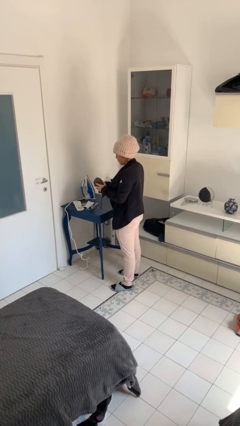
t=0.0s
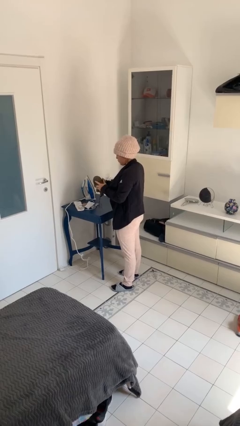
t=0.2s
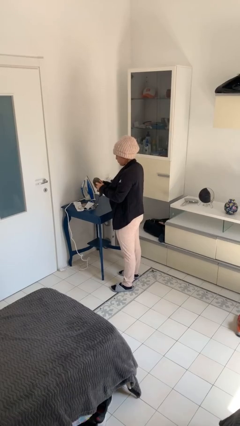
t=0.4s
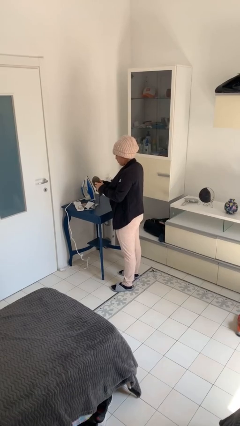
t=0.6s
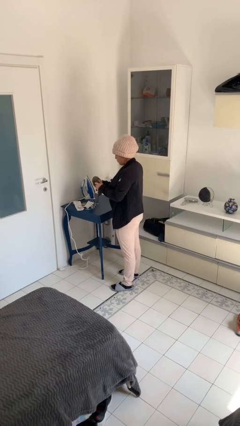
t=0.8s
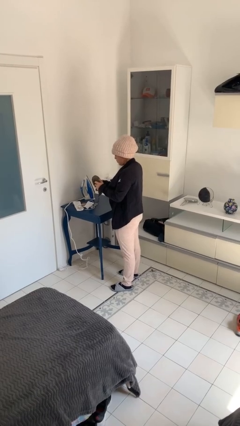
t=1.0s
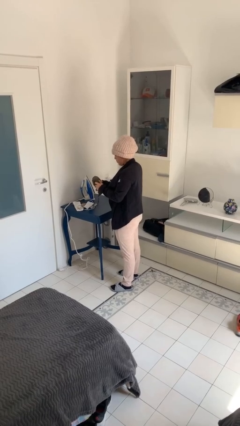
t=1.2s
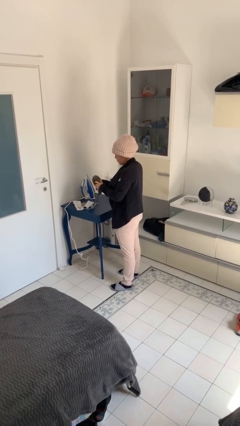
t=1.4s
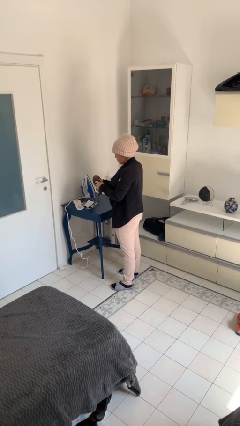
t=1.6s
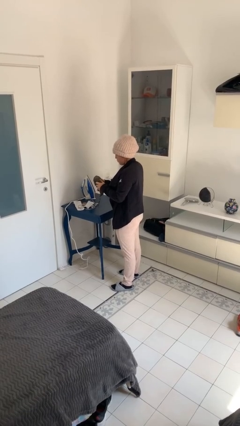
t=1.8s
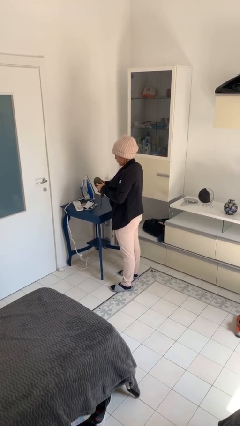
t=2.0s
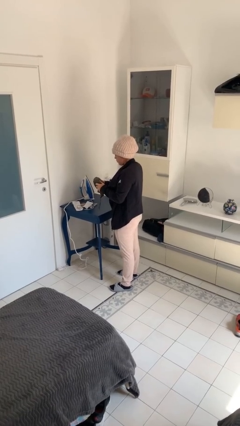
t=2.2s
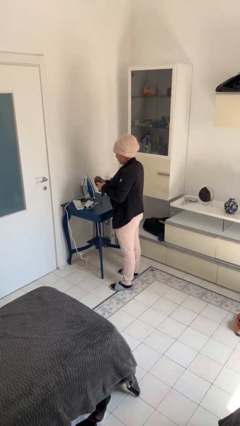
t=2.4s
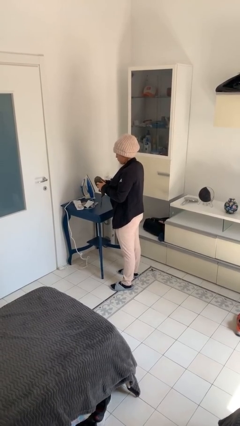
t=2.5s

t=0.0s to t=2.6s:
person squeezes object

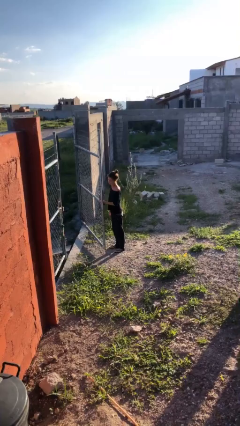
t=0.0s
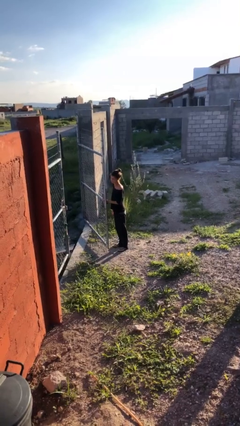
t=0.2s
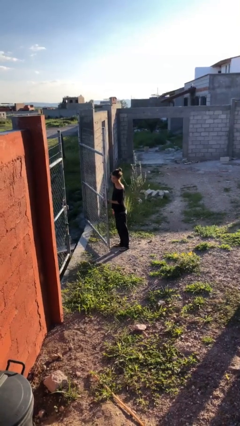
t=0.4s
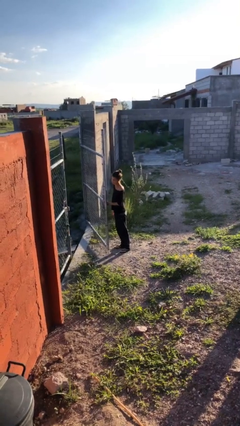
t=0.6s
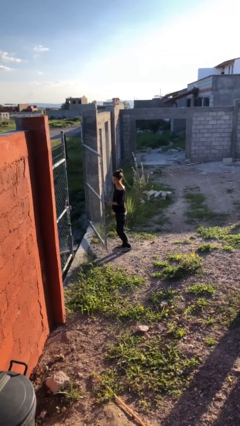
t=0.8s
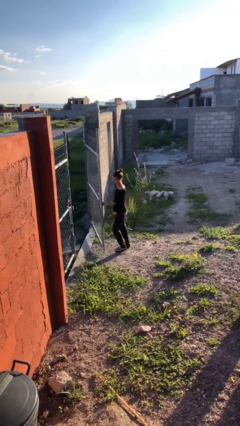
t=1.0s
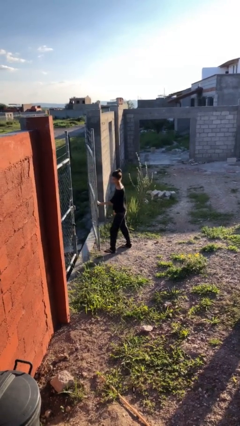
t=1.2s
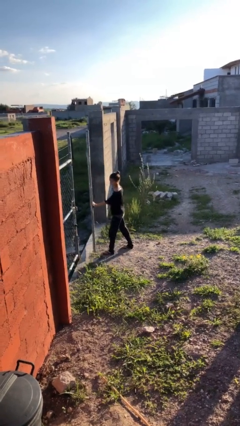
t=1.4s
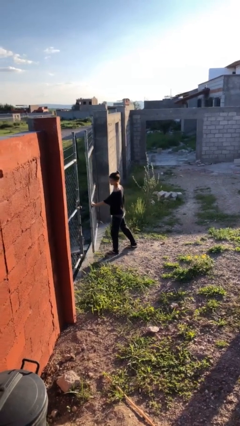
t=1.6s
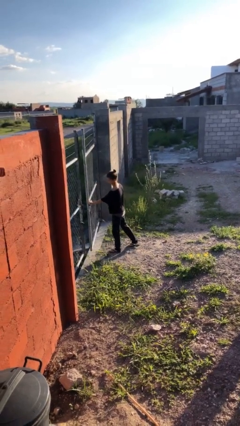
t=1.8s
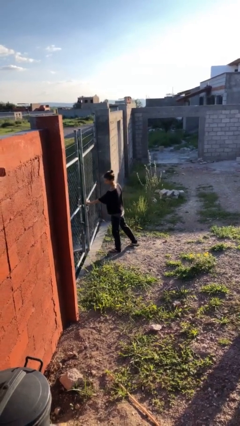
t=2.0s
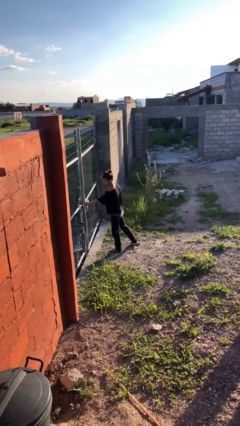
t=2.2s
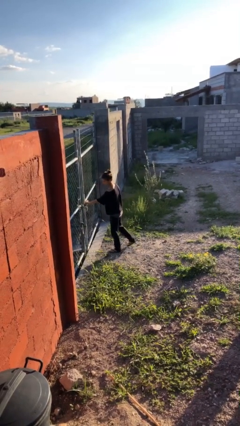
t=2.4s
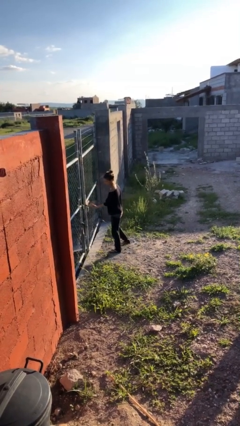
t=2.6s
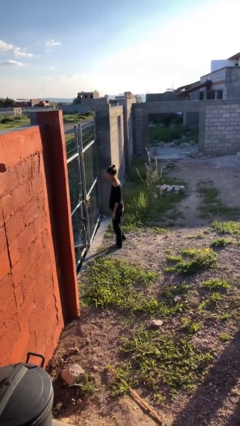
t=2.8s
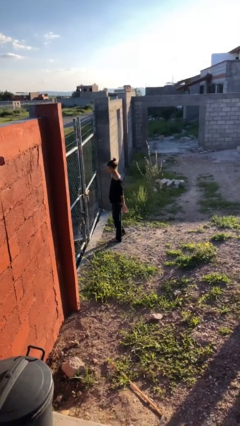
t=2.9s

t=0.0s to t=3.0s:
person closes gate

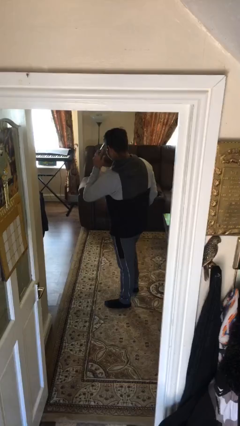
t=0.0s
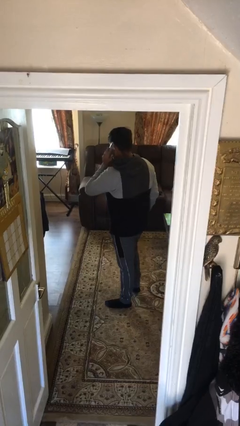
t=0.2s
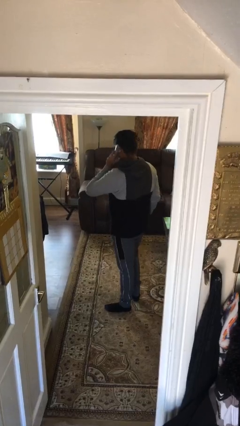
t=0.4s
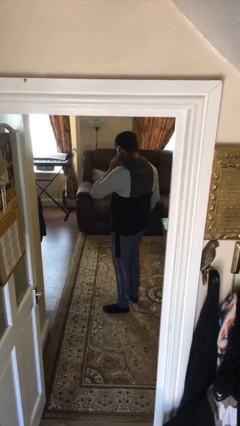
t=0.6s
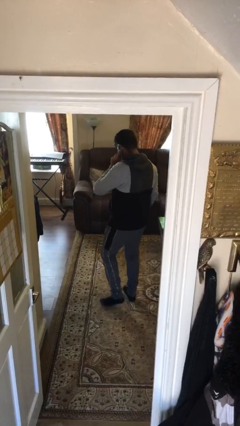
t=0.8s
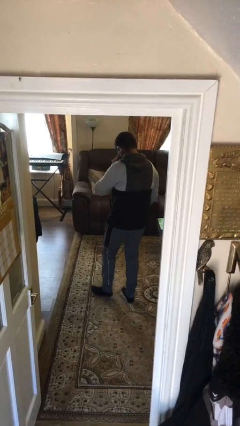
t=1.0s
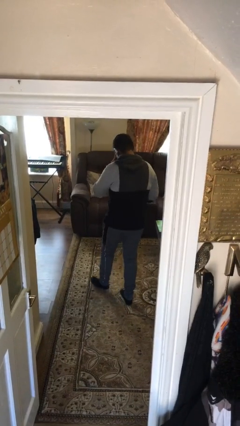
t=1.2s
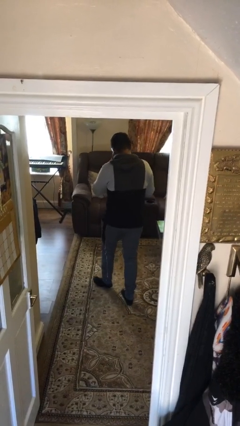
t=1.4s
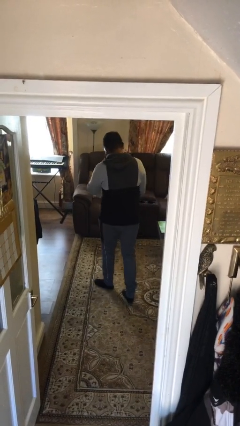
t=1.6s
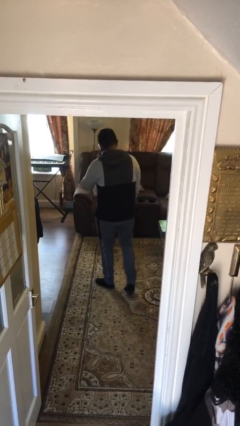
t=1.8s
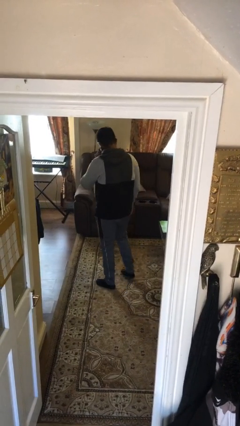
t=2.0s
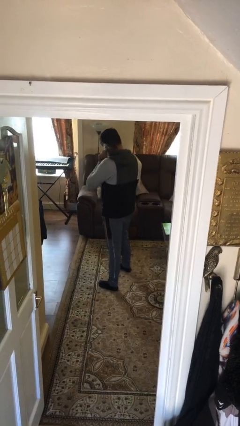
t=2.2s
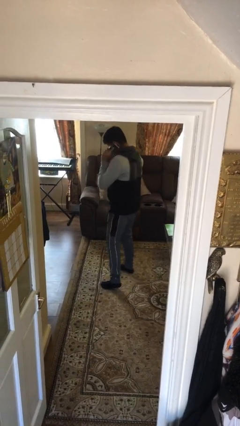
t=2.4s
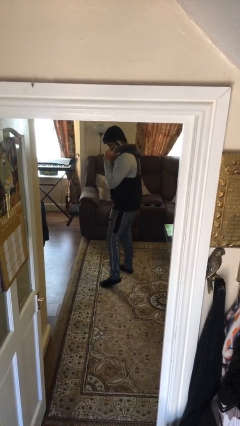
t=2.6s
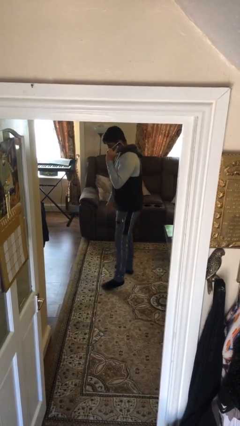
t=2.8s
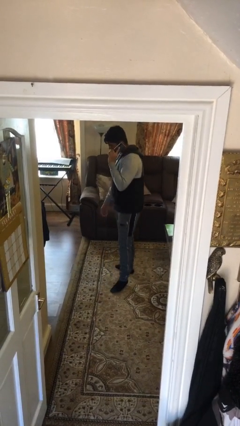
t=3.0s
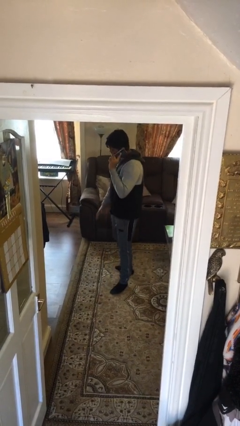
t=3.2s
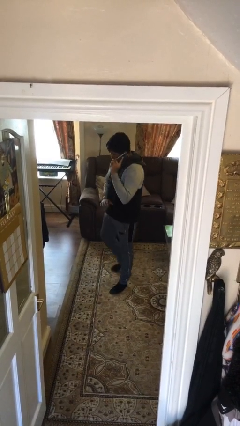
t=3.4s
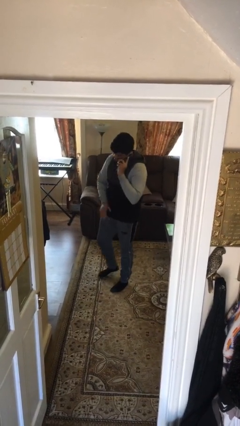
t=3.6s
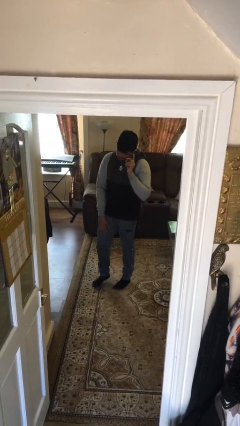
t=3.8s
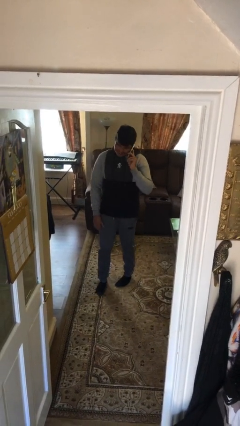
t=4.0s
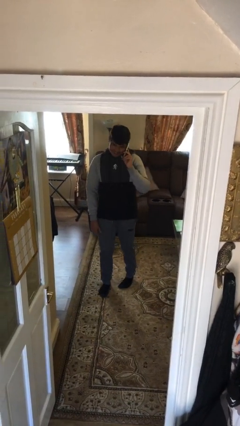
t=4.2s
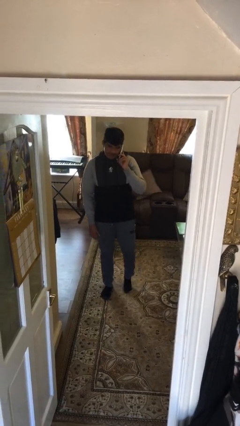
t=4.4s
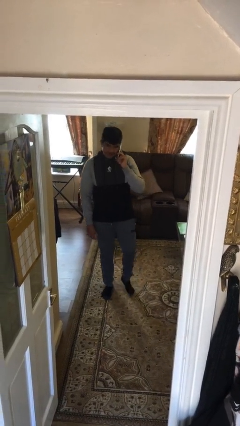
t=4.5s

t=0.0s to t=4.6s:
person talks on phone

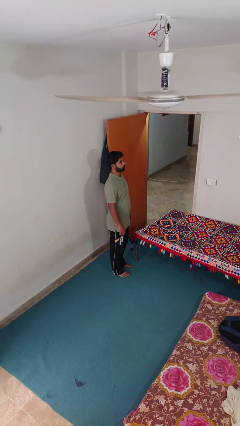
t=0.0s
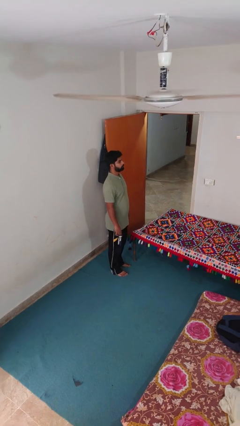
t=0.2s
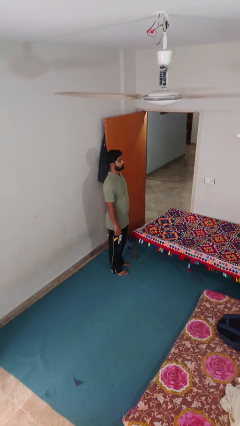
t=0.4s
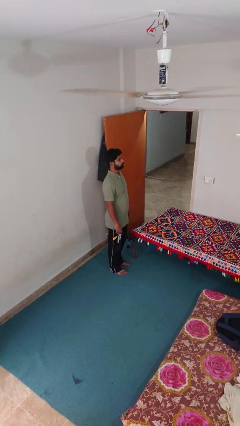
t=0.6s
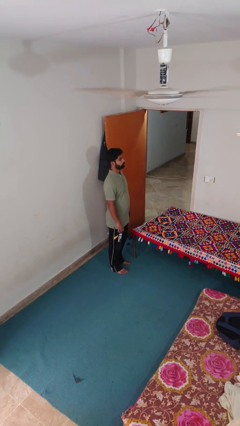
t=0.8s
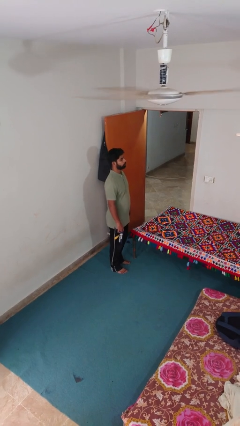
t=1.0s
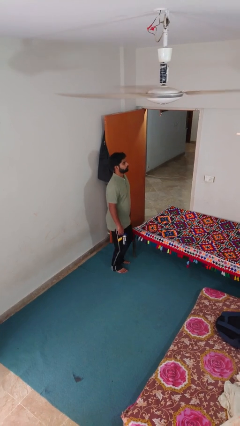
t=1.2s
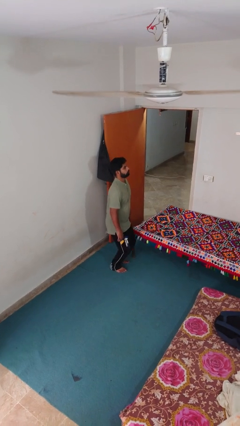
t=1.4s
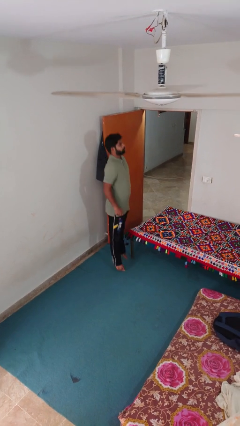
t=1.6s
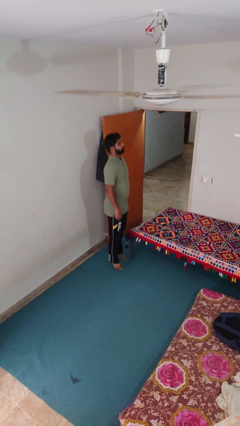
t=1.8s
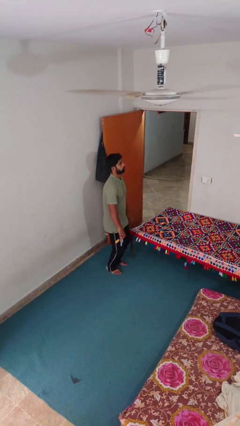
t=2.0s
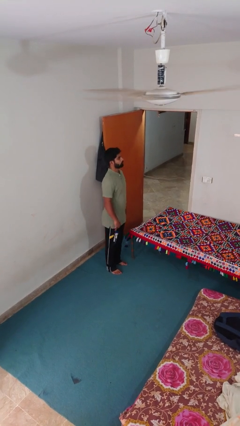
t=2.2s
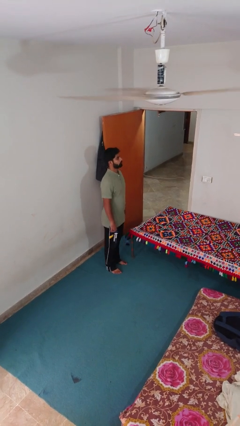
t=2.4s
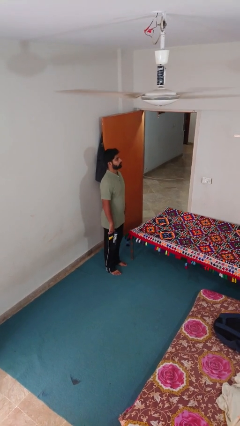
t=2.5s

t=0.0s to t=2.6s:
person jumps

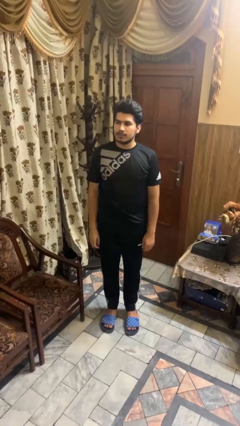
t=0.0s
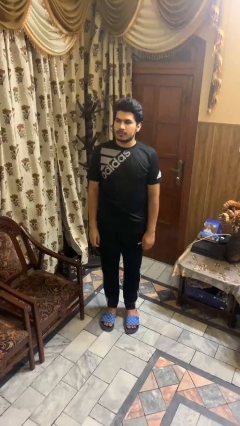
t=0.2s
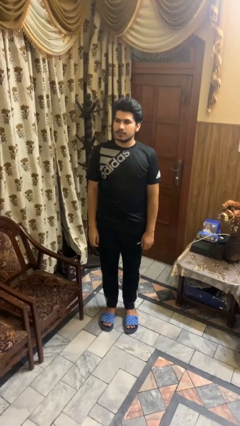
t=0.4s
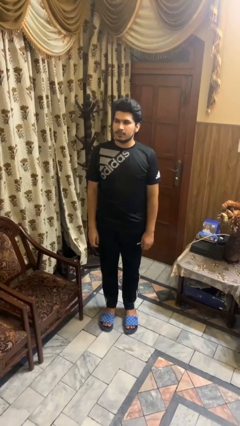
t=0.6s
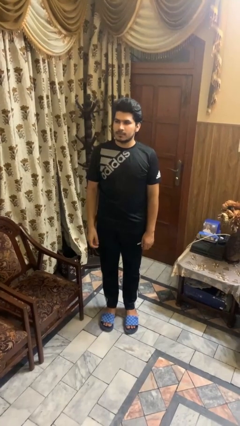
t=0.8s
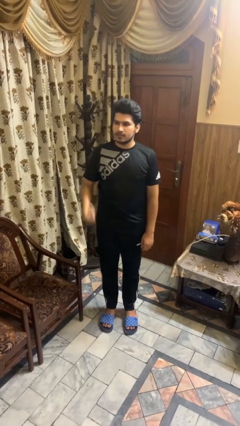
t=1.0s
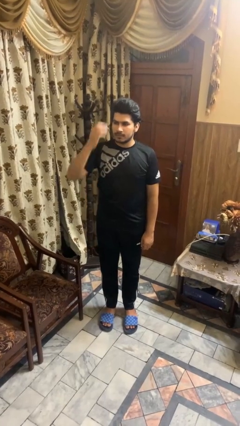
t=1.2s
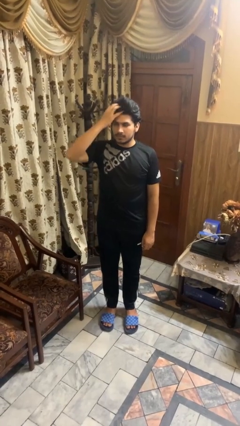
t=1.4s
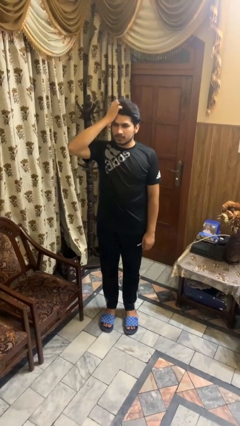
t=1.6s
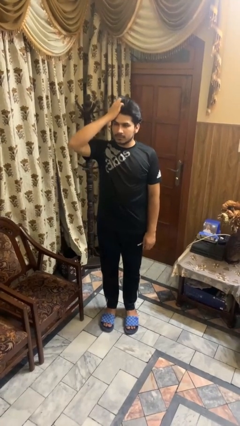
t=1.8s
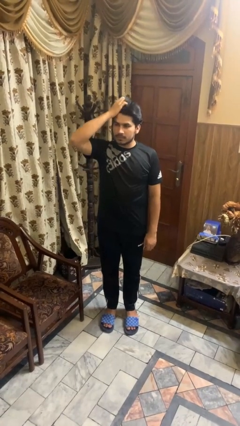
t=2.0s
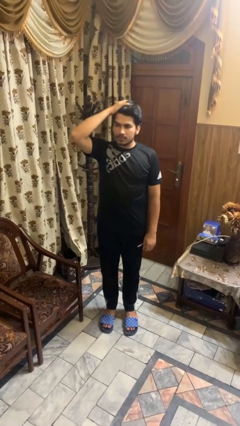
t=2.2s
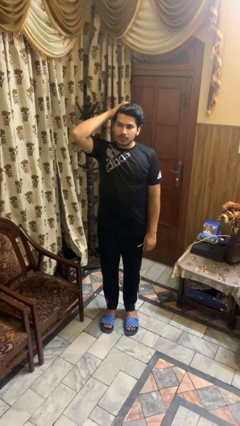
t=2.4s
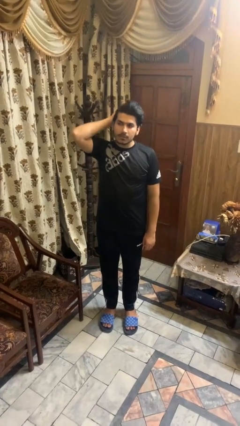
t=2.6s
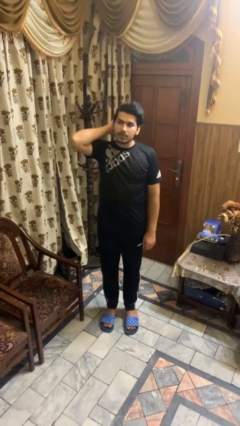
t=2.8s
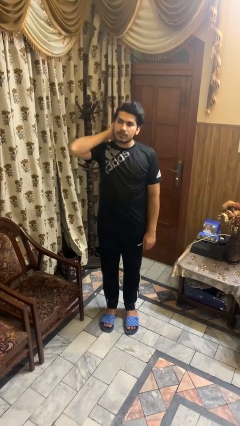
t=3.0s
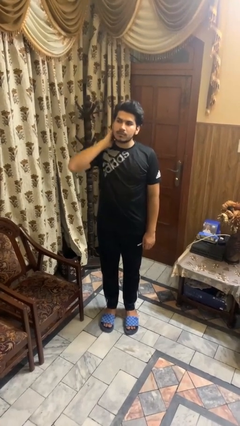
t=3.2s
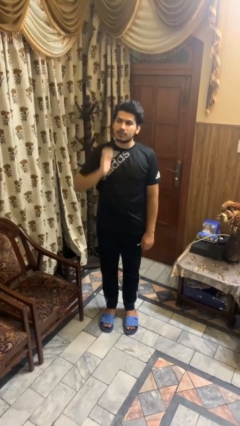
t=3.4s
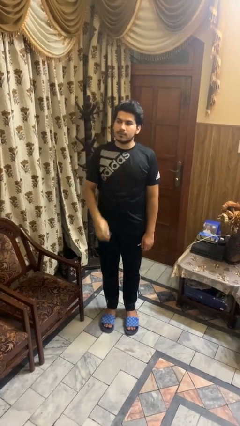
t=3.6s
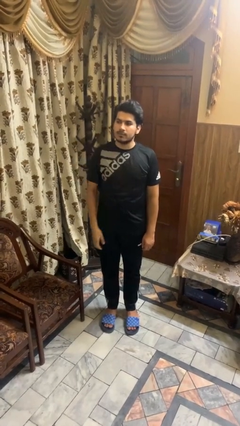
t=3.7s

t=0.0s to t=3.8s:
person scratches face

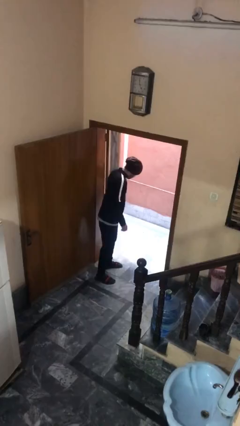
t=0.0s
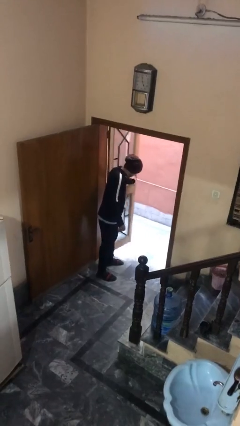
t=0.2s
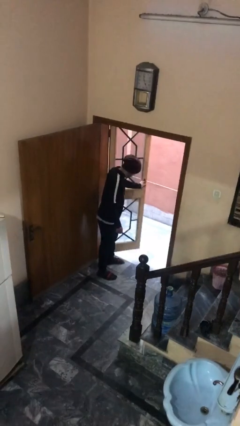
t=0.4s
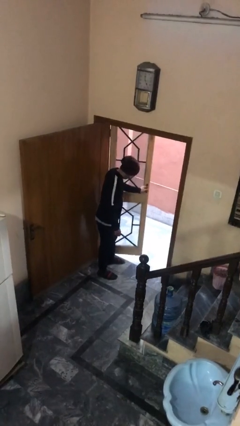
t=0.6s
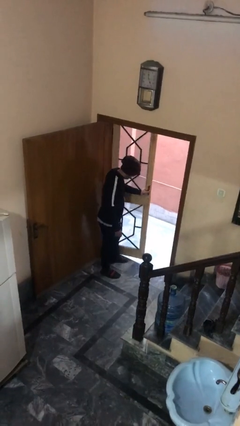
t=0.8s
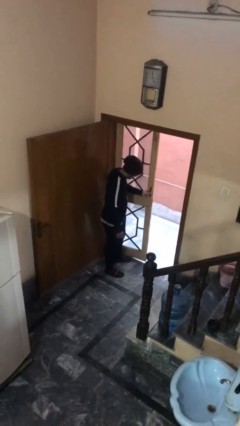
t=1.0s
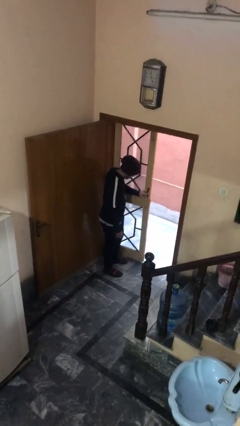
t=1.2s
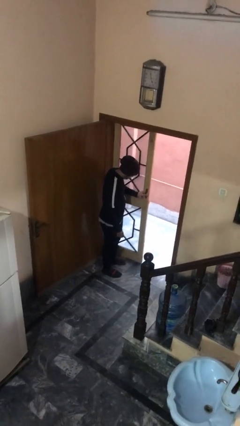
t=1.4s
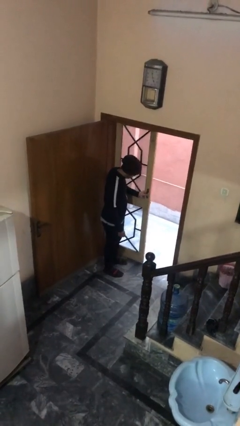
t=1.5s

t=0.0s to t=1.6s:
person closes facility door
